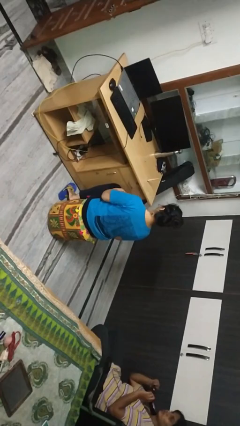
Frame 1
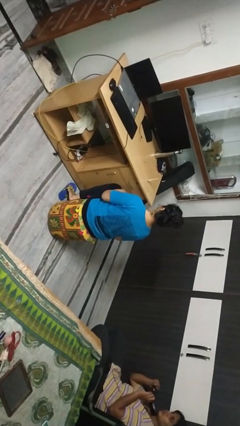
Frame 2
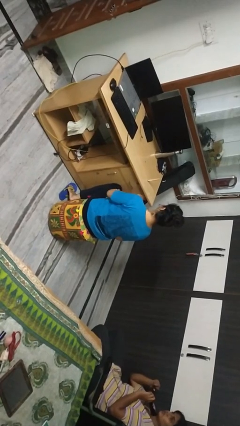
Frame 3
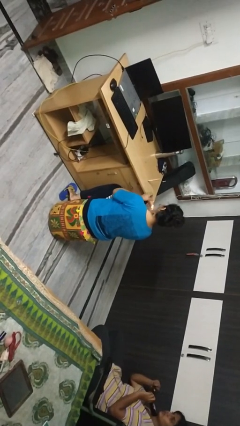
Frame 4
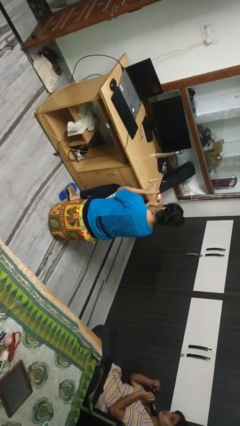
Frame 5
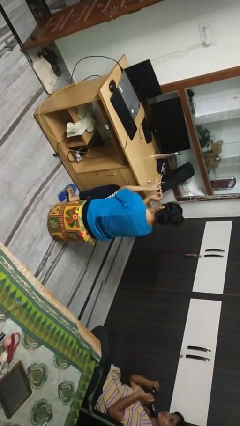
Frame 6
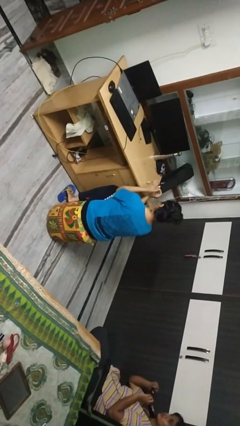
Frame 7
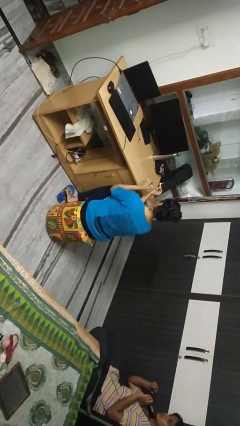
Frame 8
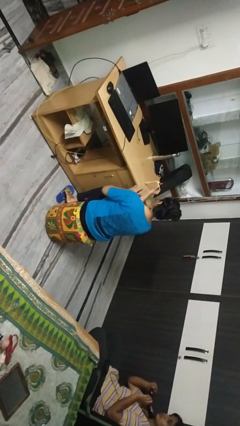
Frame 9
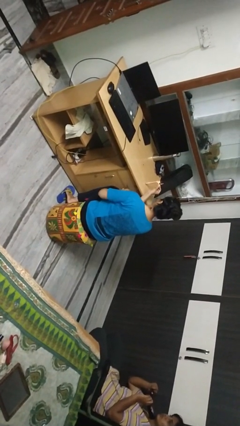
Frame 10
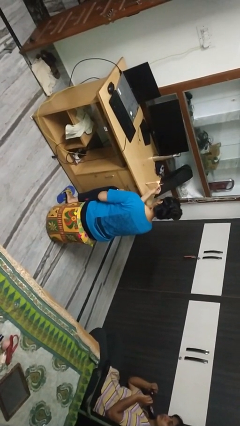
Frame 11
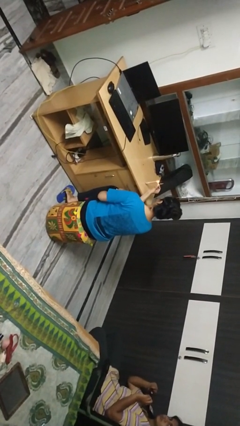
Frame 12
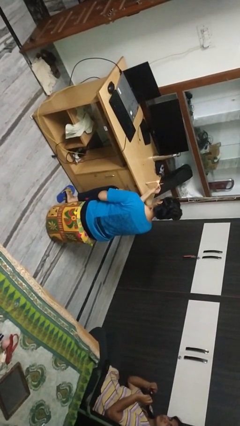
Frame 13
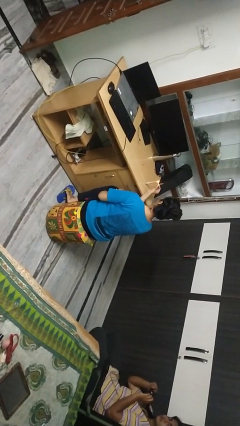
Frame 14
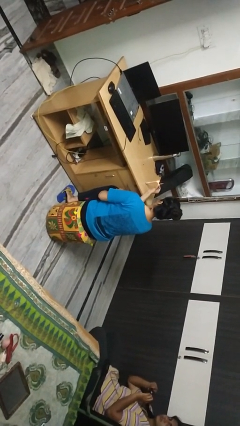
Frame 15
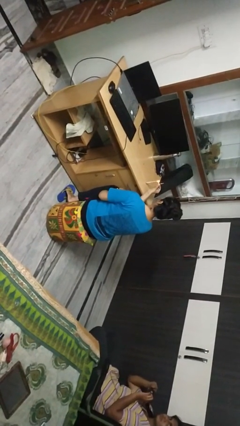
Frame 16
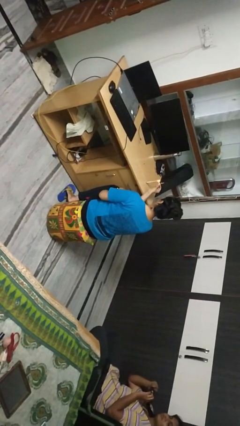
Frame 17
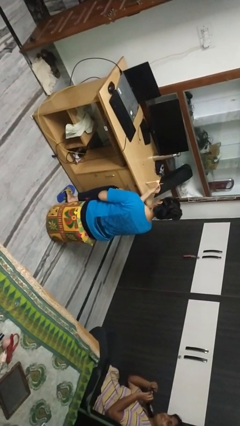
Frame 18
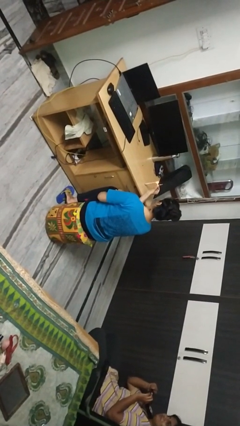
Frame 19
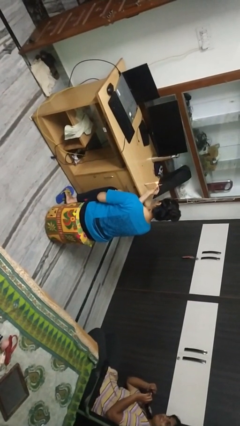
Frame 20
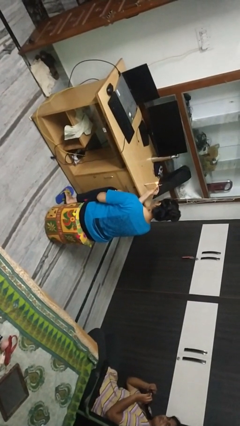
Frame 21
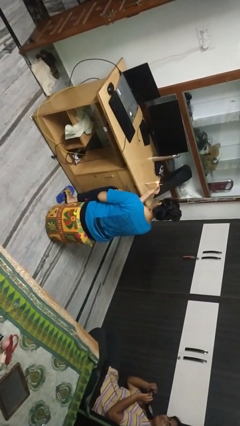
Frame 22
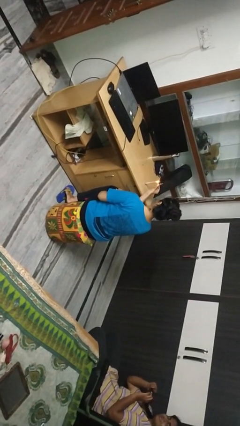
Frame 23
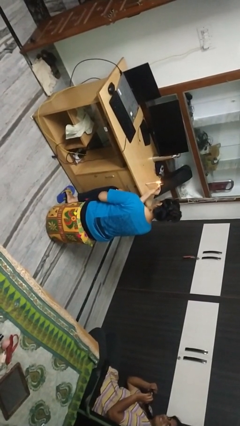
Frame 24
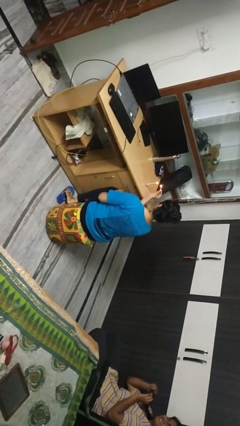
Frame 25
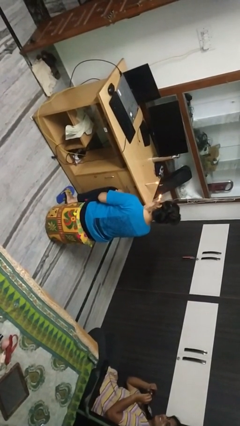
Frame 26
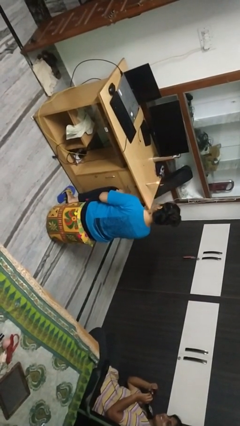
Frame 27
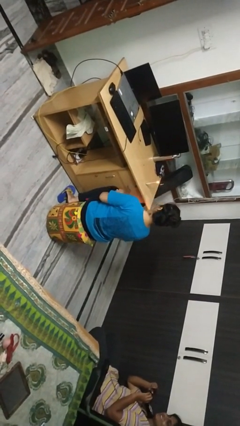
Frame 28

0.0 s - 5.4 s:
person lights candle

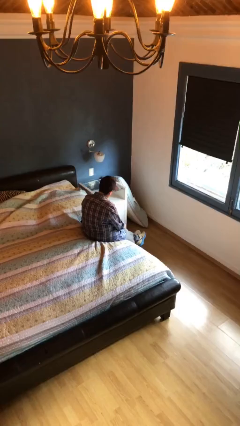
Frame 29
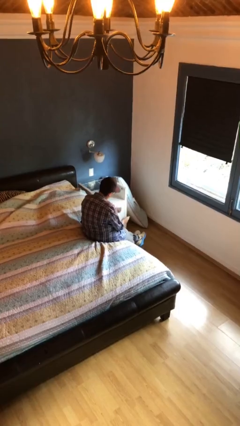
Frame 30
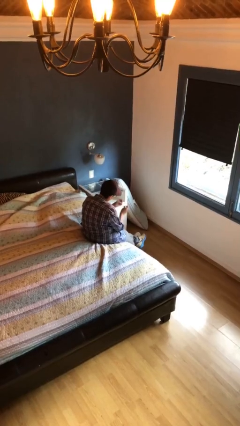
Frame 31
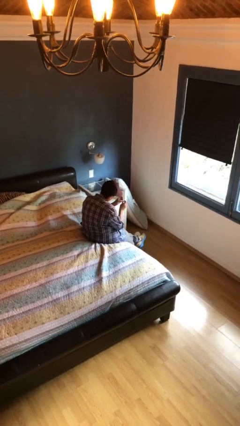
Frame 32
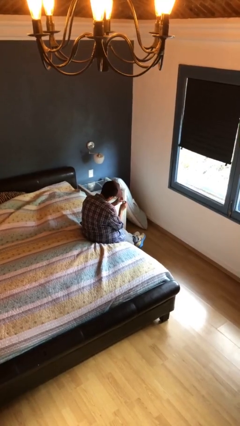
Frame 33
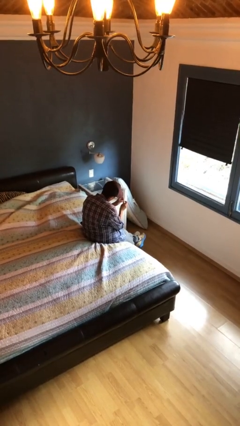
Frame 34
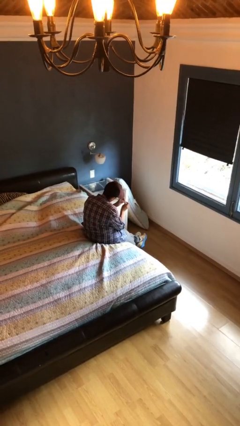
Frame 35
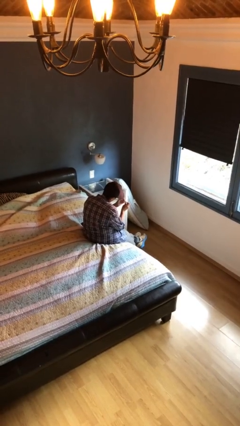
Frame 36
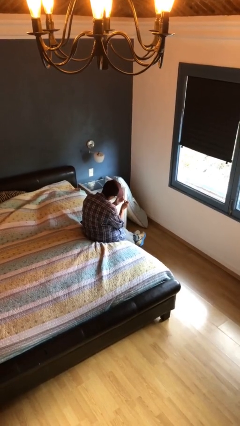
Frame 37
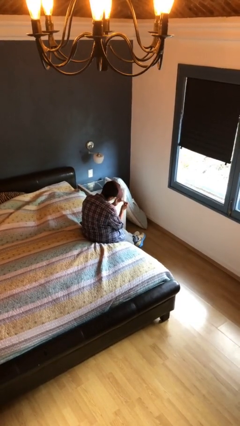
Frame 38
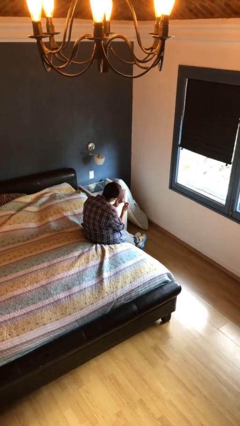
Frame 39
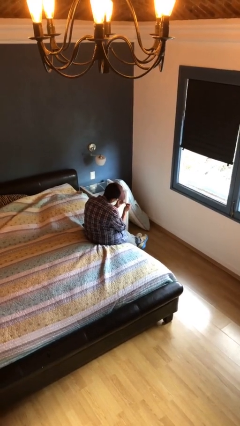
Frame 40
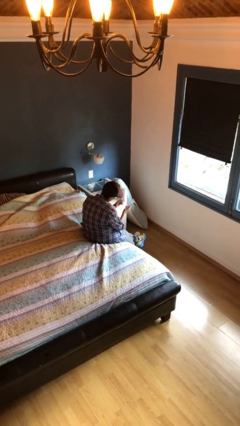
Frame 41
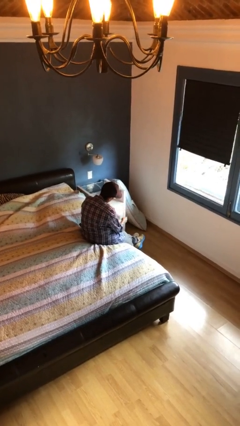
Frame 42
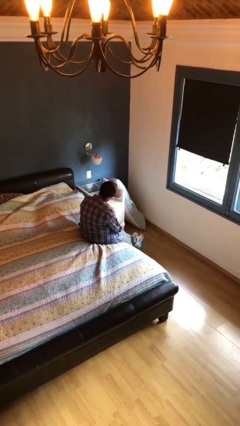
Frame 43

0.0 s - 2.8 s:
person clips fingernails

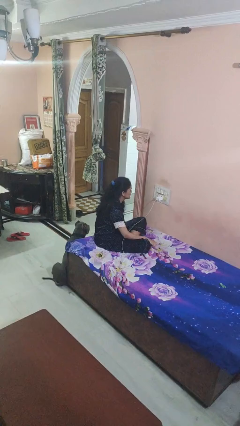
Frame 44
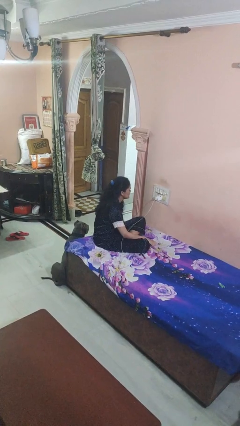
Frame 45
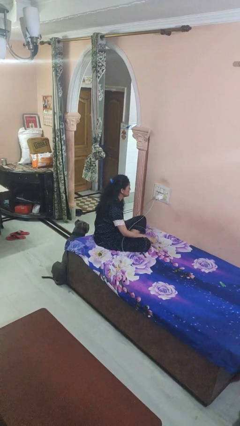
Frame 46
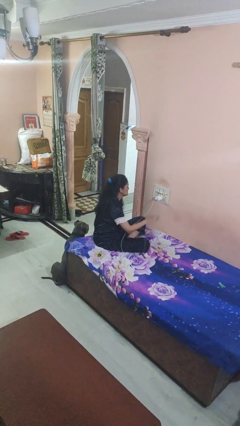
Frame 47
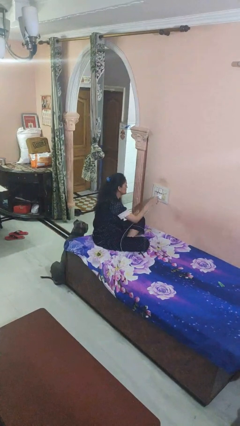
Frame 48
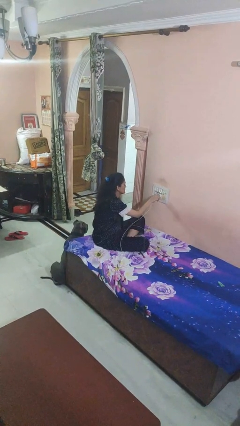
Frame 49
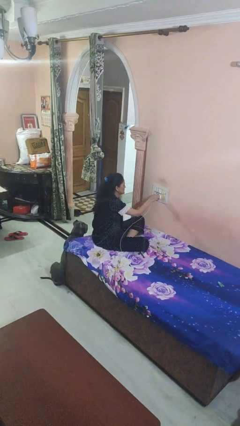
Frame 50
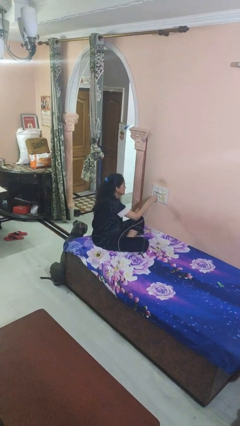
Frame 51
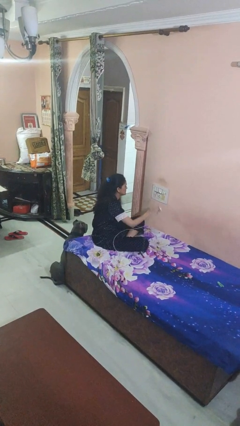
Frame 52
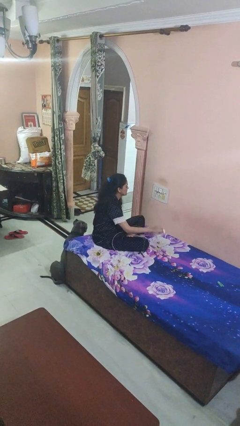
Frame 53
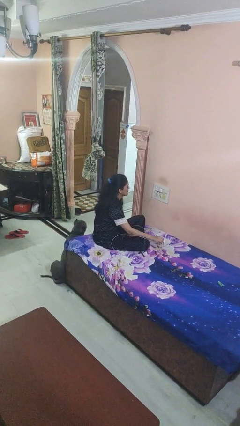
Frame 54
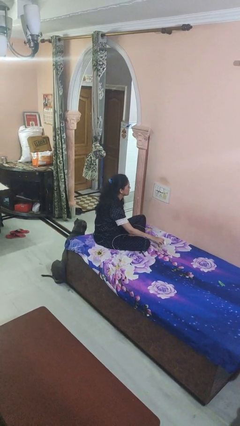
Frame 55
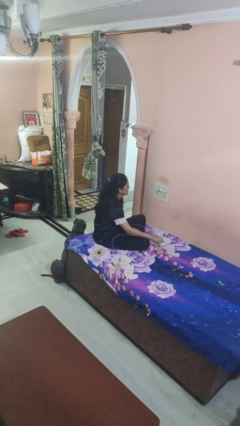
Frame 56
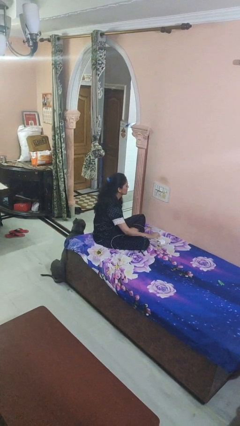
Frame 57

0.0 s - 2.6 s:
person unplugs from electrical socket

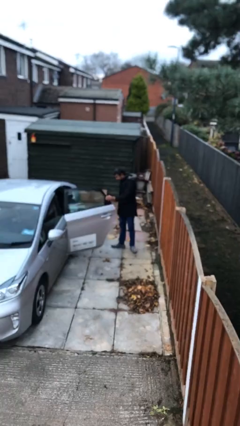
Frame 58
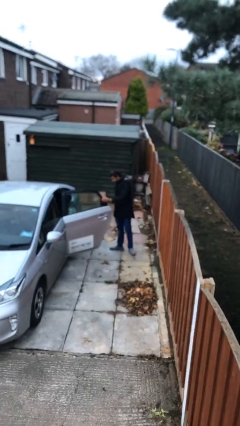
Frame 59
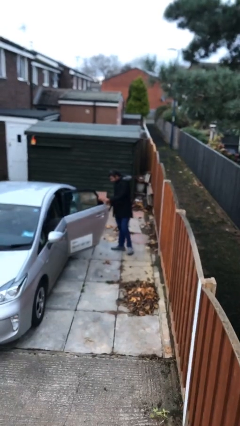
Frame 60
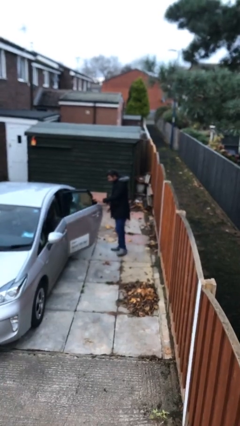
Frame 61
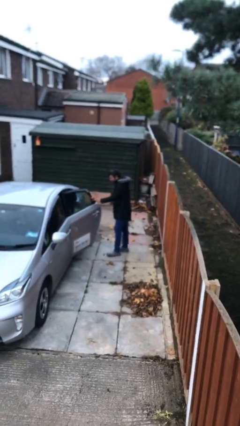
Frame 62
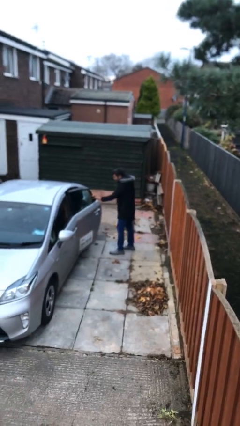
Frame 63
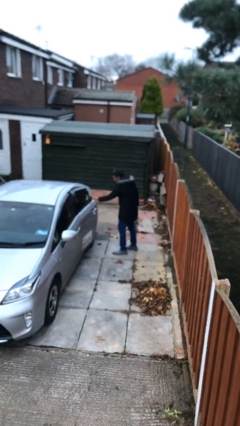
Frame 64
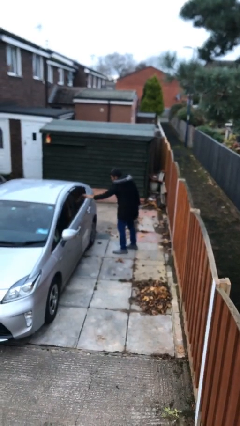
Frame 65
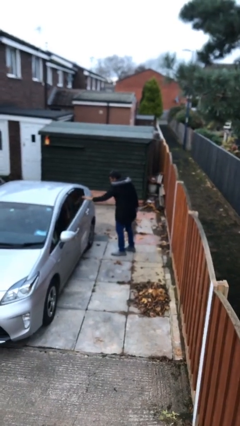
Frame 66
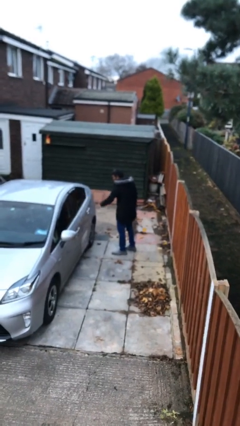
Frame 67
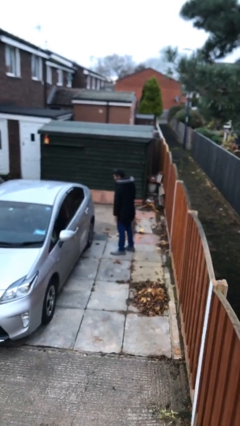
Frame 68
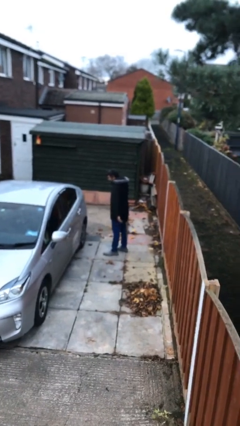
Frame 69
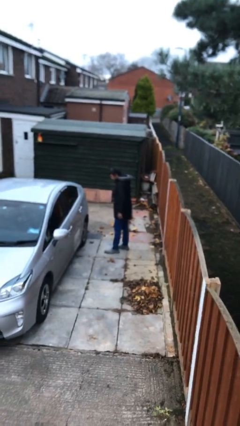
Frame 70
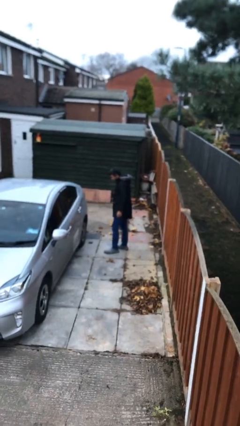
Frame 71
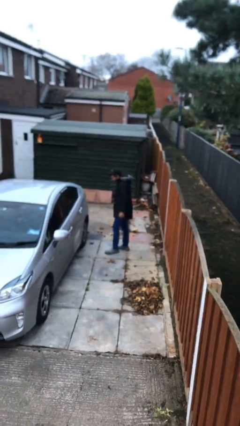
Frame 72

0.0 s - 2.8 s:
person closes car door

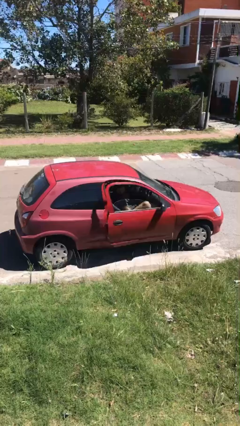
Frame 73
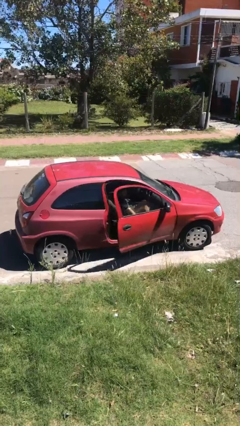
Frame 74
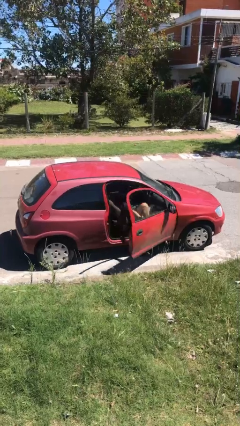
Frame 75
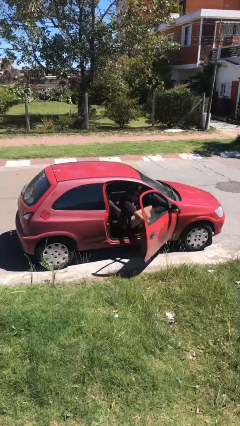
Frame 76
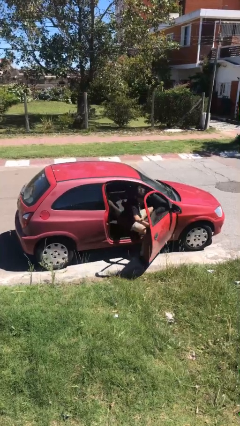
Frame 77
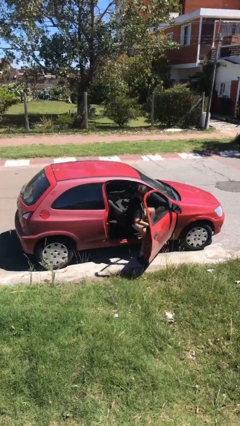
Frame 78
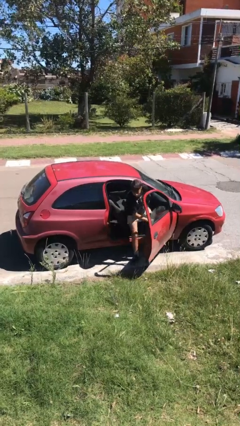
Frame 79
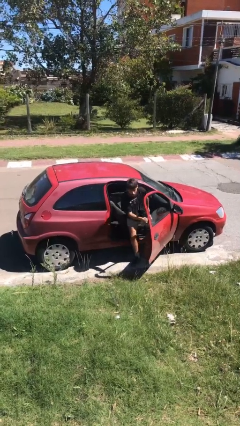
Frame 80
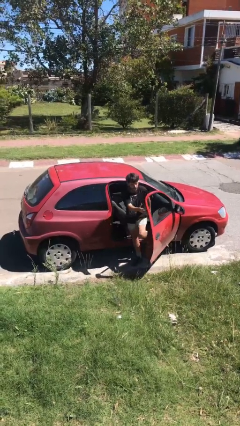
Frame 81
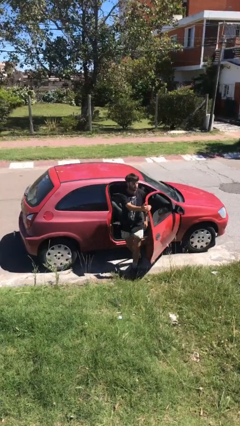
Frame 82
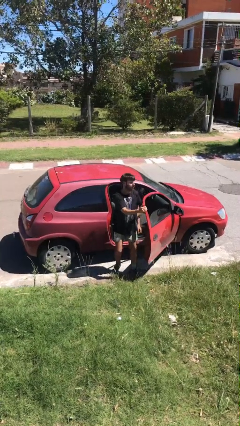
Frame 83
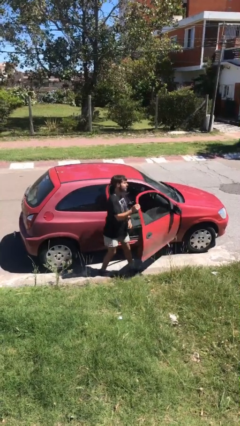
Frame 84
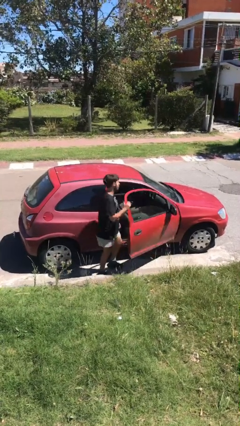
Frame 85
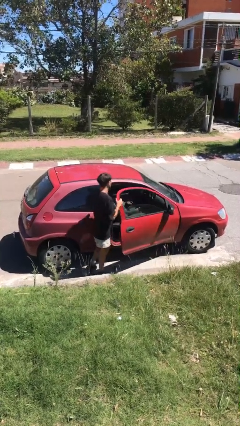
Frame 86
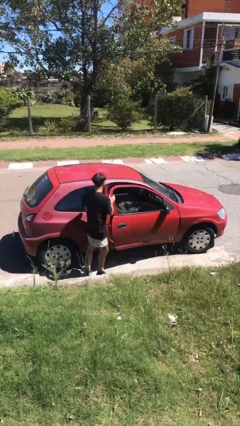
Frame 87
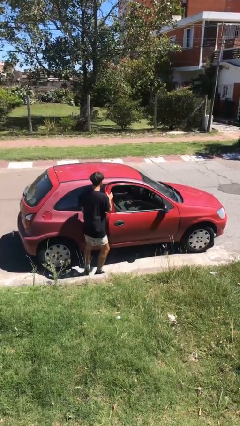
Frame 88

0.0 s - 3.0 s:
car drops off person

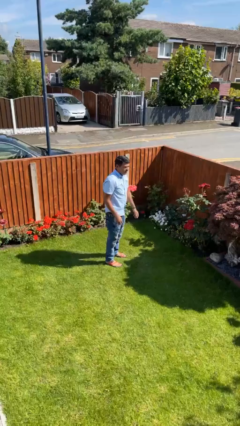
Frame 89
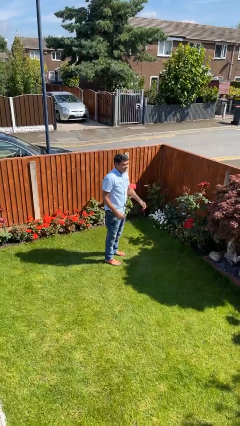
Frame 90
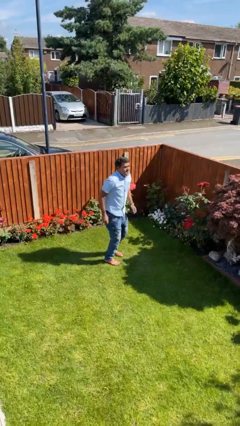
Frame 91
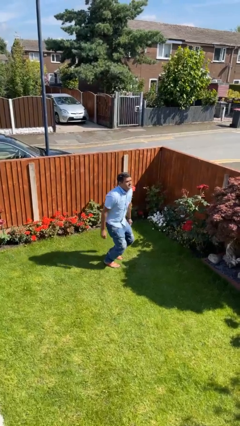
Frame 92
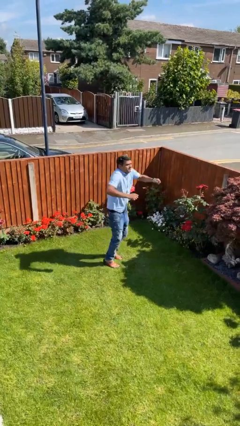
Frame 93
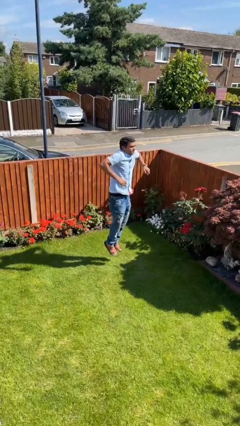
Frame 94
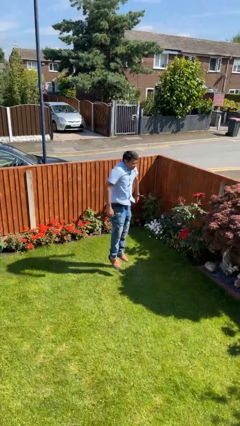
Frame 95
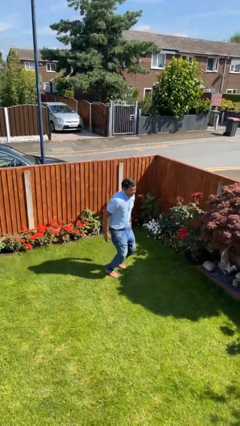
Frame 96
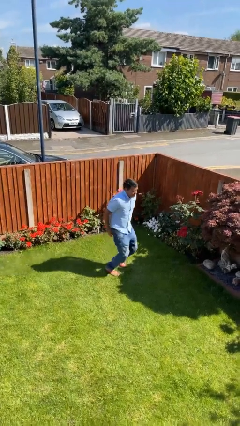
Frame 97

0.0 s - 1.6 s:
person jumps
